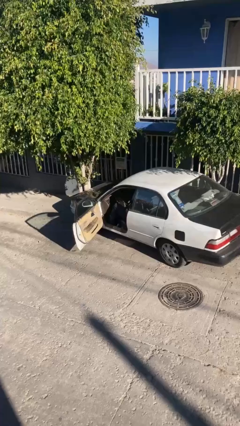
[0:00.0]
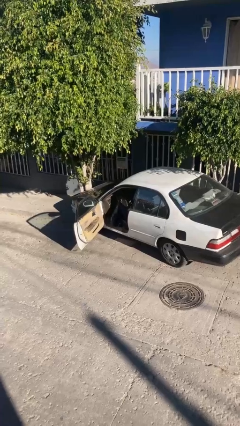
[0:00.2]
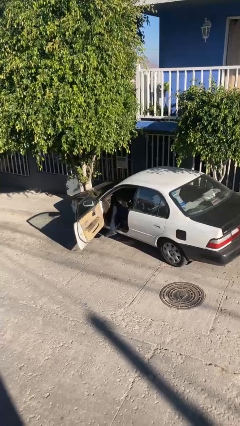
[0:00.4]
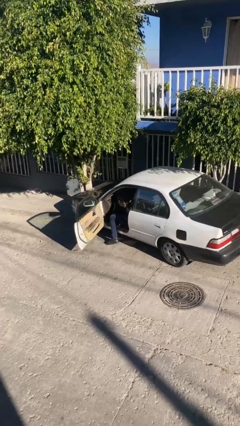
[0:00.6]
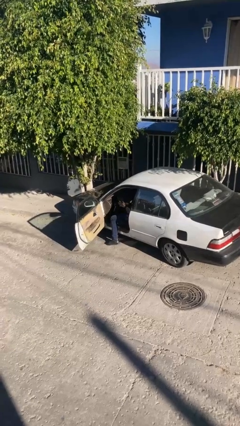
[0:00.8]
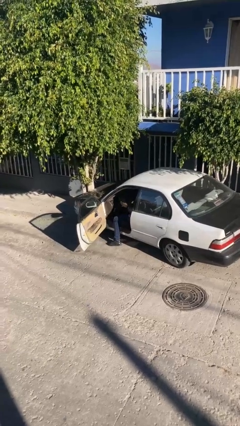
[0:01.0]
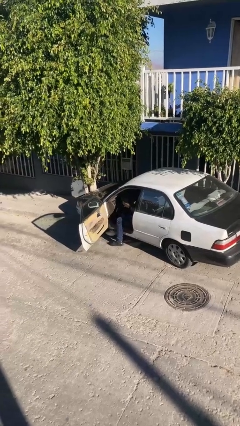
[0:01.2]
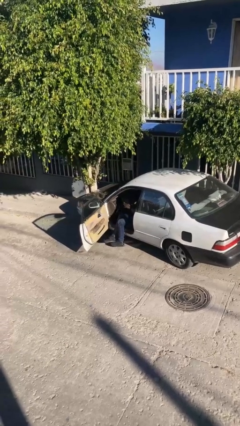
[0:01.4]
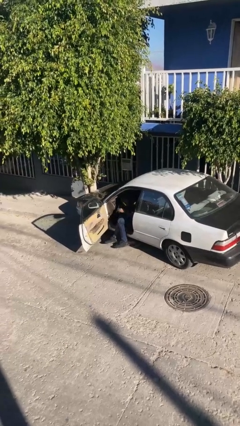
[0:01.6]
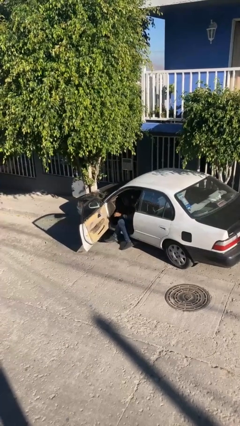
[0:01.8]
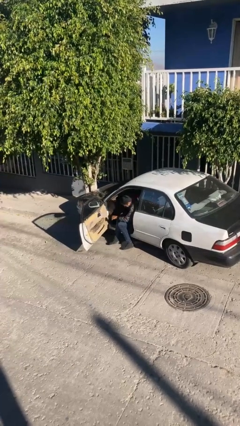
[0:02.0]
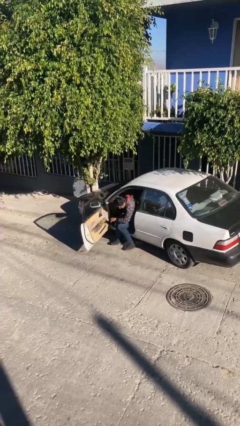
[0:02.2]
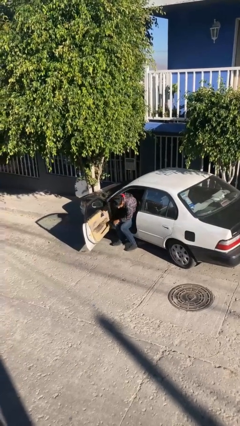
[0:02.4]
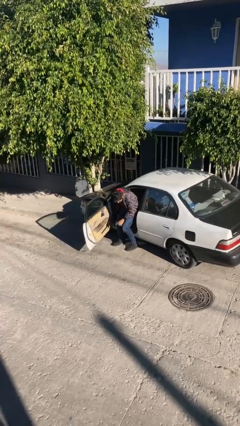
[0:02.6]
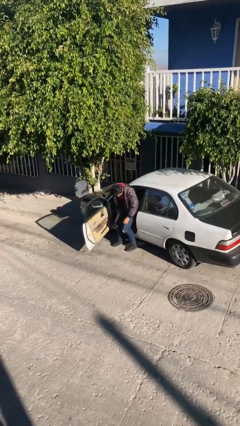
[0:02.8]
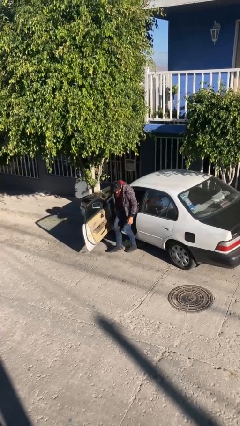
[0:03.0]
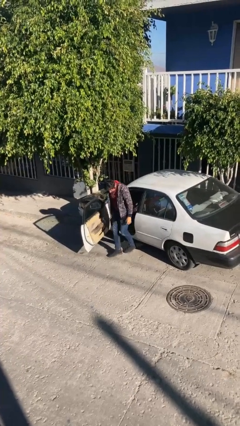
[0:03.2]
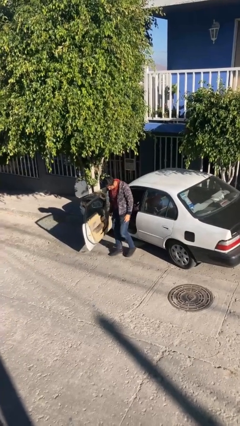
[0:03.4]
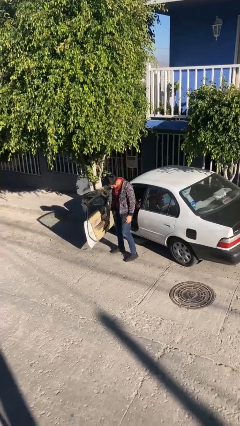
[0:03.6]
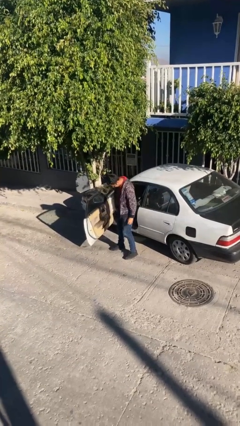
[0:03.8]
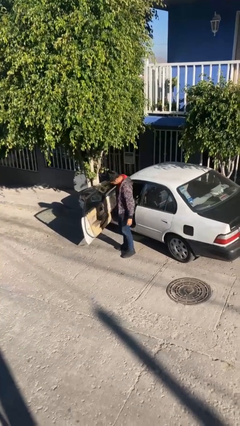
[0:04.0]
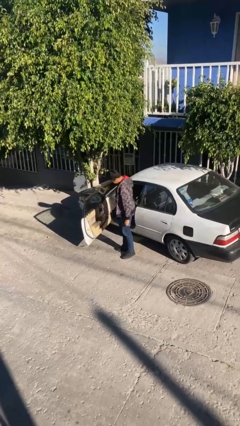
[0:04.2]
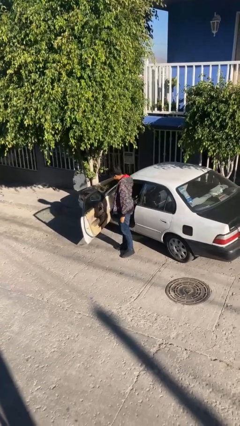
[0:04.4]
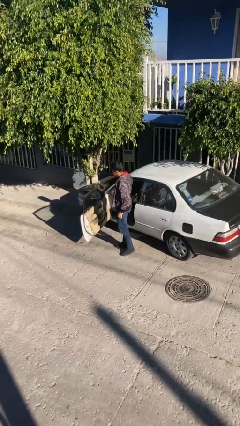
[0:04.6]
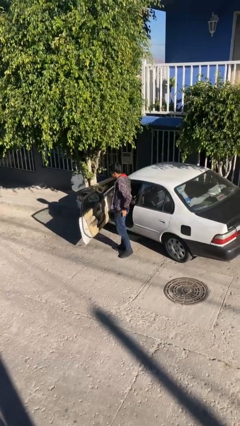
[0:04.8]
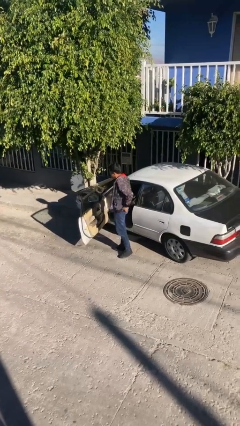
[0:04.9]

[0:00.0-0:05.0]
person exits car

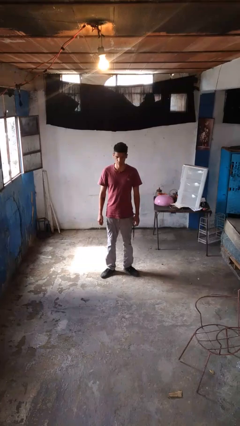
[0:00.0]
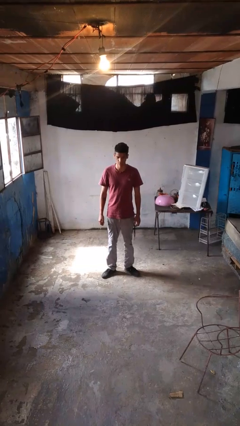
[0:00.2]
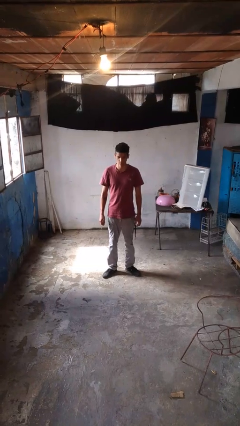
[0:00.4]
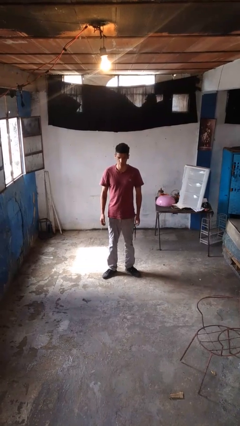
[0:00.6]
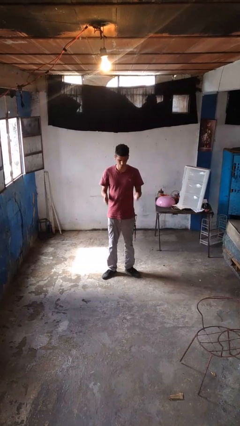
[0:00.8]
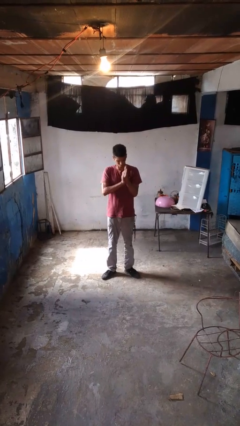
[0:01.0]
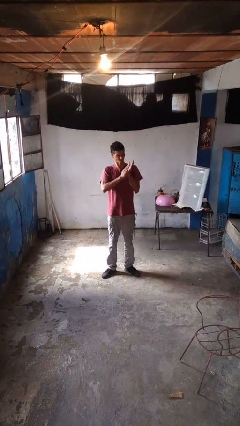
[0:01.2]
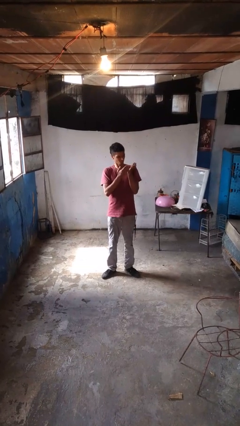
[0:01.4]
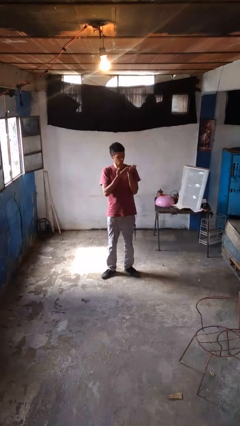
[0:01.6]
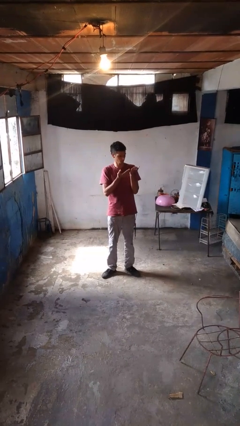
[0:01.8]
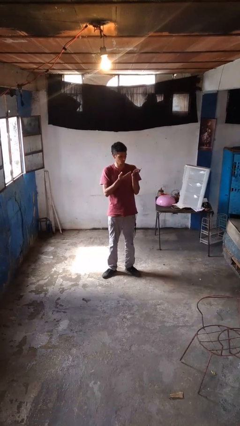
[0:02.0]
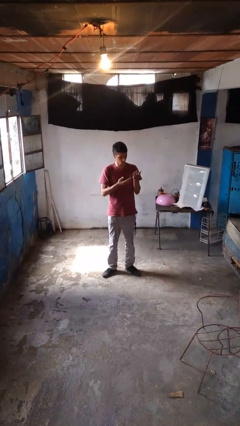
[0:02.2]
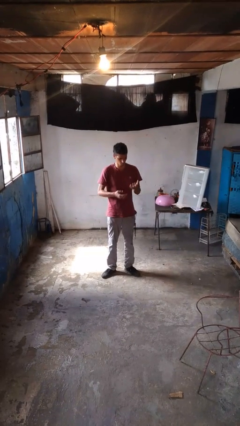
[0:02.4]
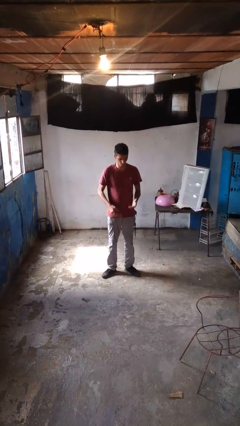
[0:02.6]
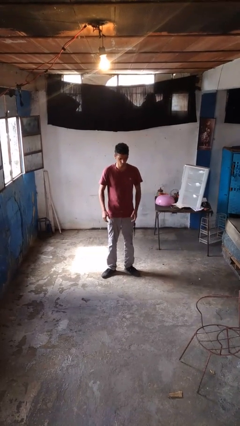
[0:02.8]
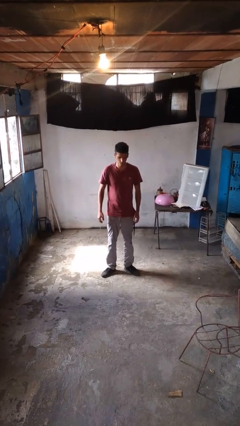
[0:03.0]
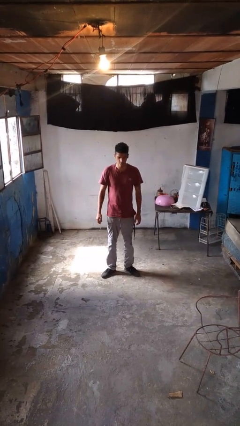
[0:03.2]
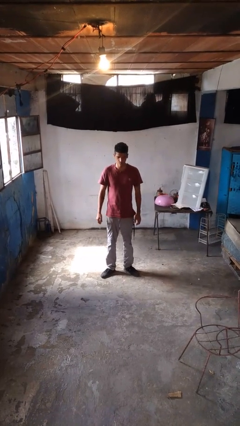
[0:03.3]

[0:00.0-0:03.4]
person swats bug

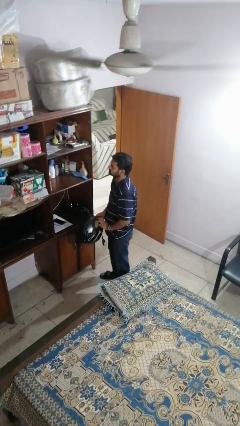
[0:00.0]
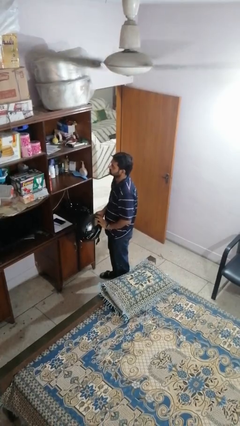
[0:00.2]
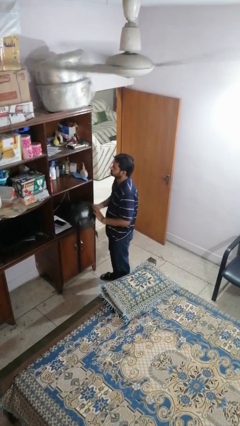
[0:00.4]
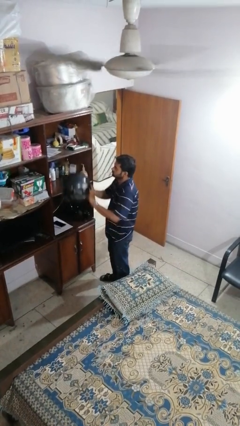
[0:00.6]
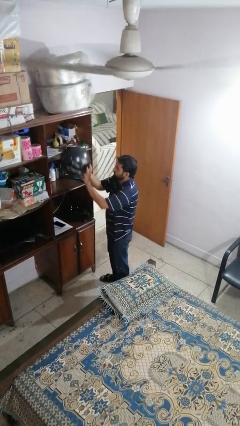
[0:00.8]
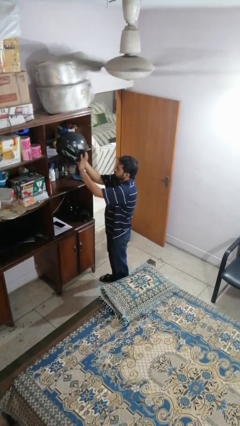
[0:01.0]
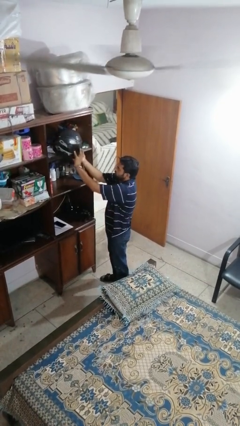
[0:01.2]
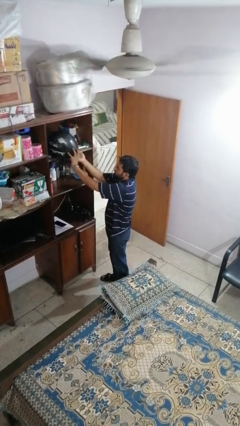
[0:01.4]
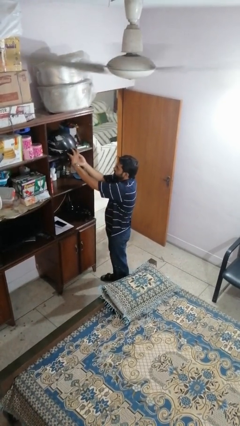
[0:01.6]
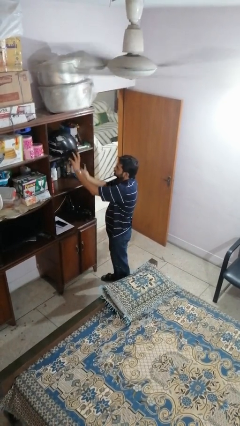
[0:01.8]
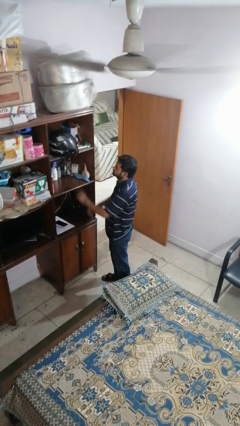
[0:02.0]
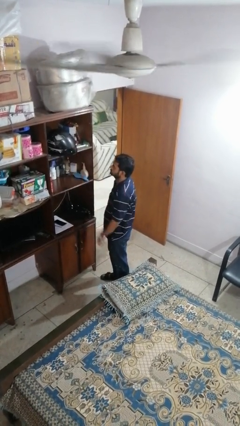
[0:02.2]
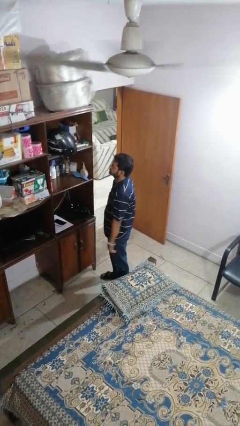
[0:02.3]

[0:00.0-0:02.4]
person puts down object on shelf

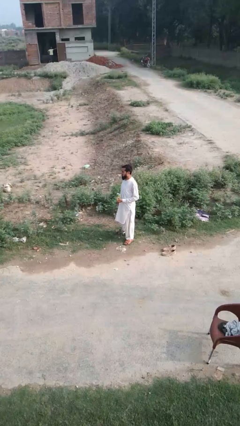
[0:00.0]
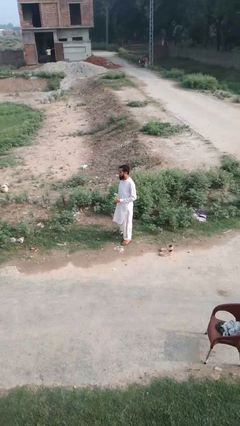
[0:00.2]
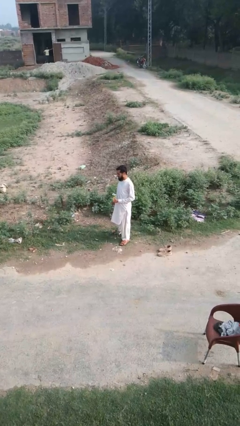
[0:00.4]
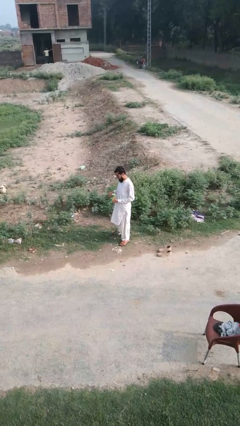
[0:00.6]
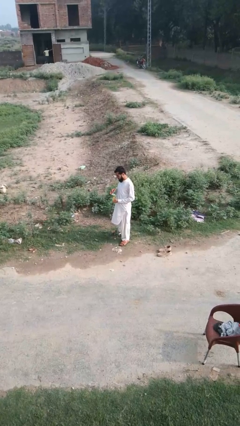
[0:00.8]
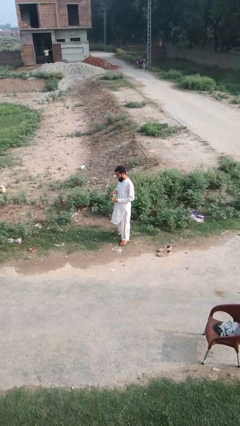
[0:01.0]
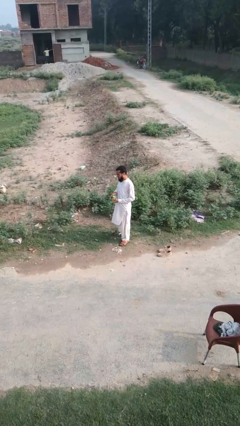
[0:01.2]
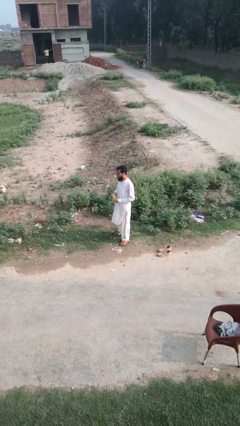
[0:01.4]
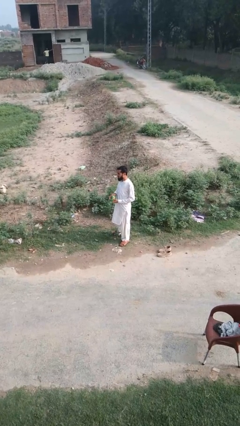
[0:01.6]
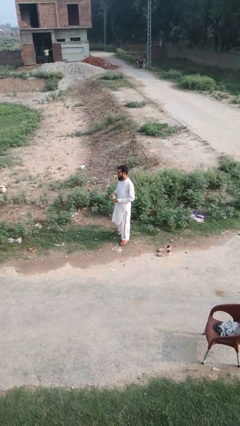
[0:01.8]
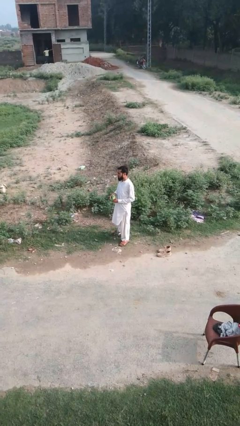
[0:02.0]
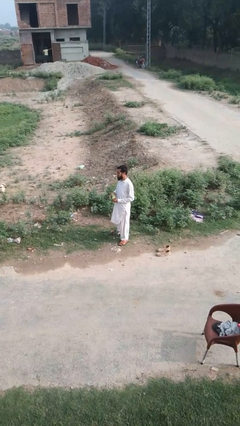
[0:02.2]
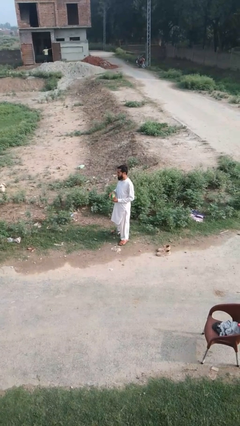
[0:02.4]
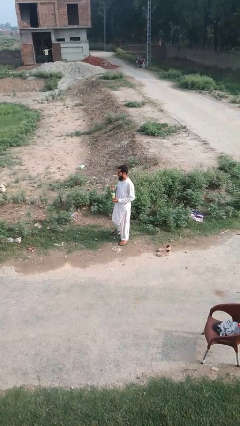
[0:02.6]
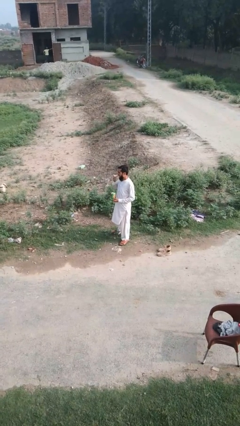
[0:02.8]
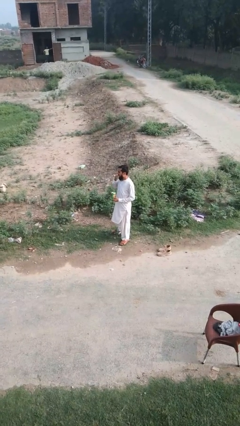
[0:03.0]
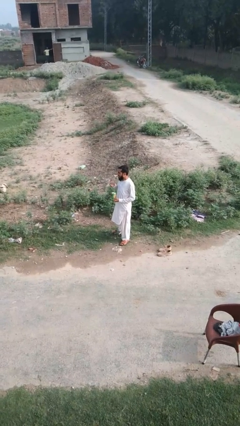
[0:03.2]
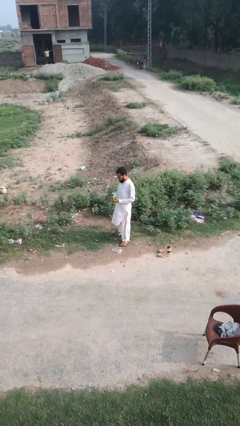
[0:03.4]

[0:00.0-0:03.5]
person eats snack from bag

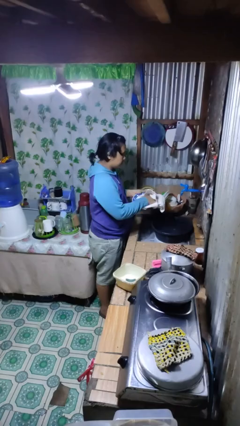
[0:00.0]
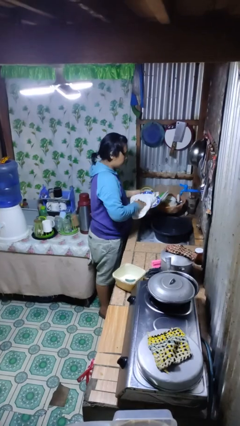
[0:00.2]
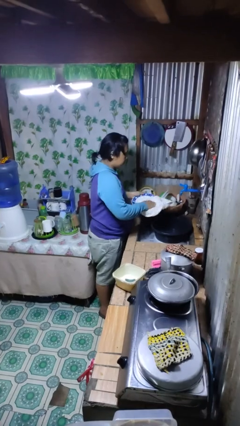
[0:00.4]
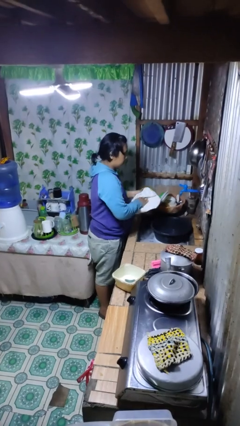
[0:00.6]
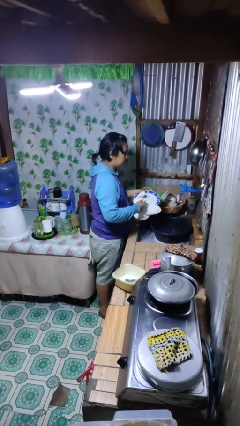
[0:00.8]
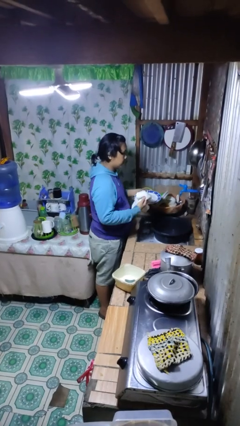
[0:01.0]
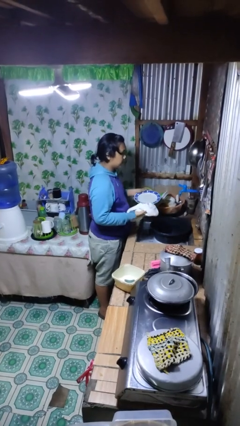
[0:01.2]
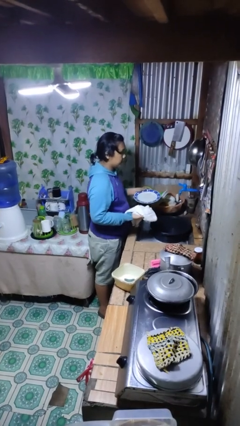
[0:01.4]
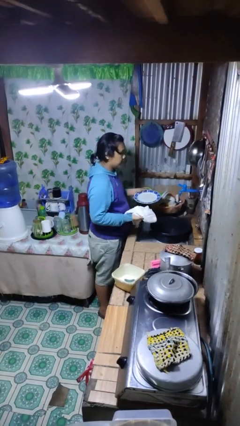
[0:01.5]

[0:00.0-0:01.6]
person dries dish

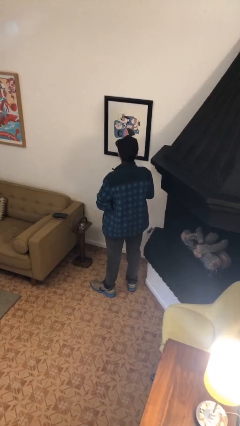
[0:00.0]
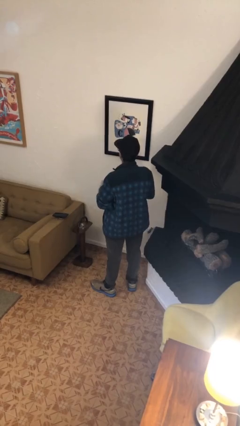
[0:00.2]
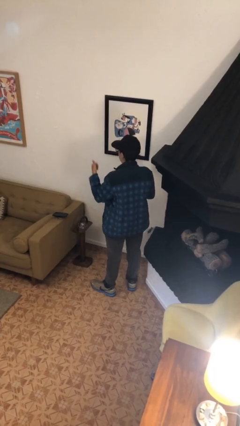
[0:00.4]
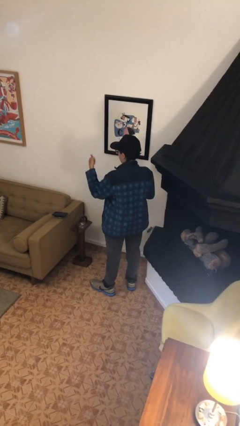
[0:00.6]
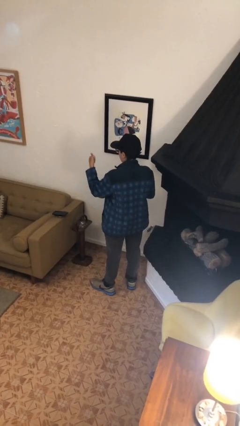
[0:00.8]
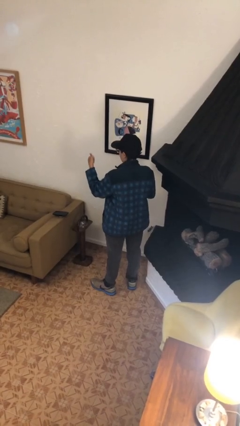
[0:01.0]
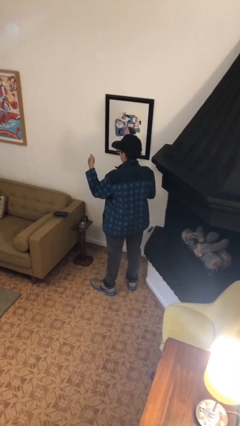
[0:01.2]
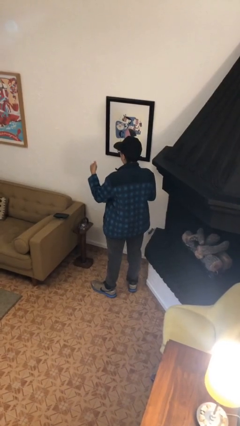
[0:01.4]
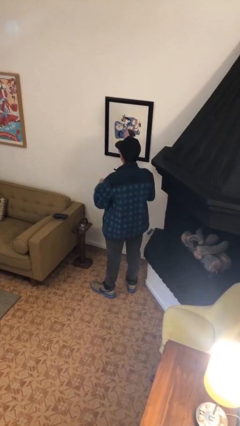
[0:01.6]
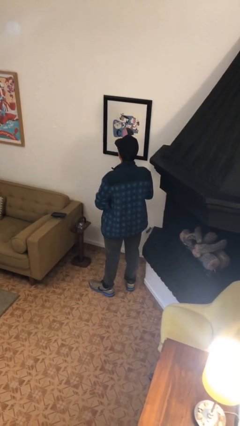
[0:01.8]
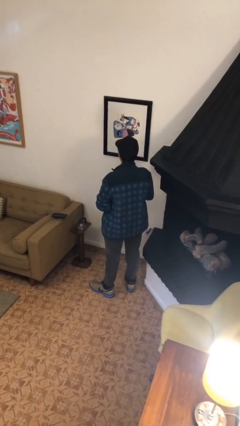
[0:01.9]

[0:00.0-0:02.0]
person gestures thumbs up
